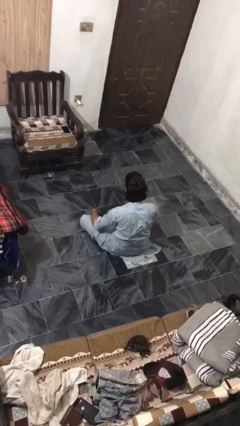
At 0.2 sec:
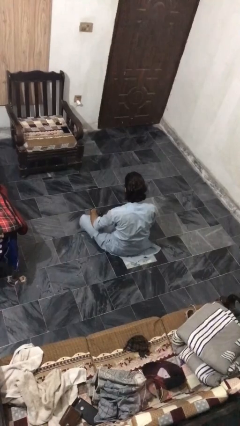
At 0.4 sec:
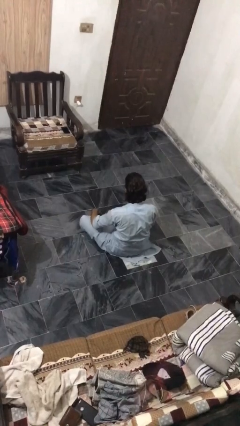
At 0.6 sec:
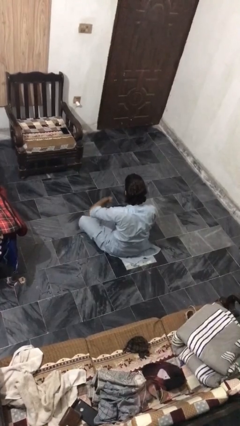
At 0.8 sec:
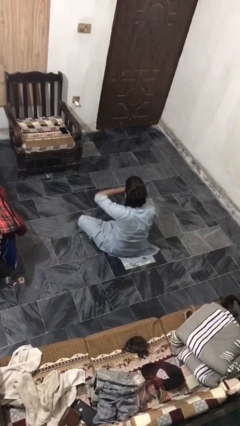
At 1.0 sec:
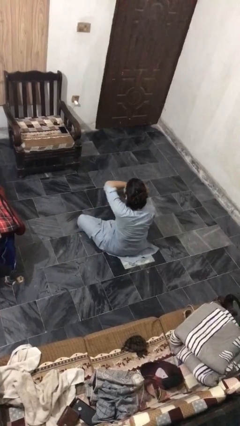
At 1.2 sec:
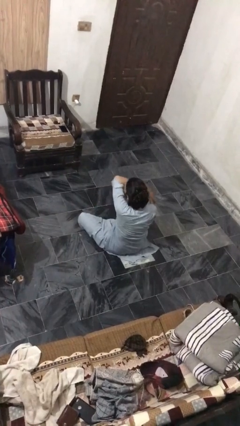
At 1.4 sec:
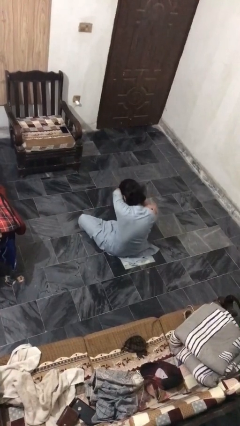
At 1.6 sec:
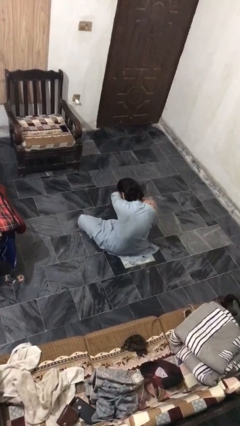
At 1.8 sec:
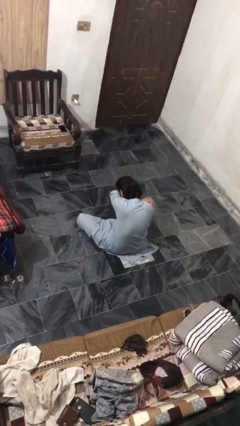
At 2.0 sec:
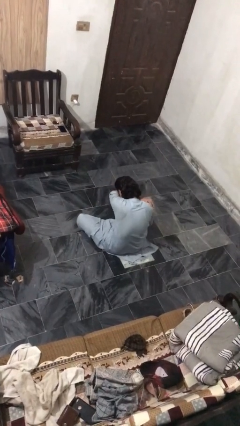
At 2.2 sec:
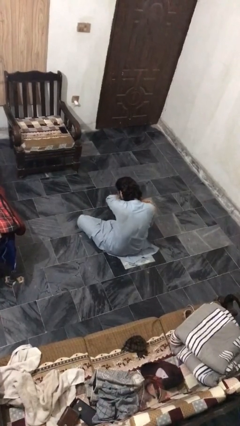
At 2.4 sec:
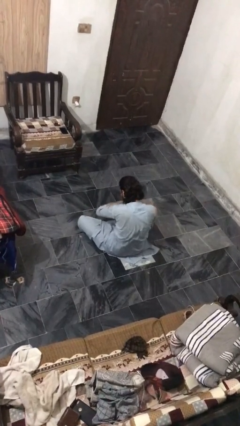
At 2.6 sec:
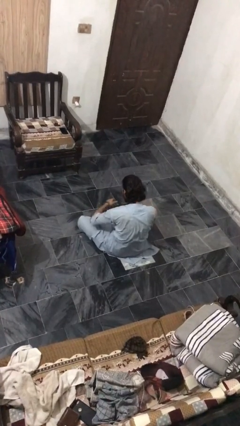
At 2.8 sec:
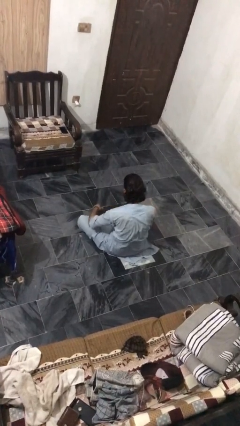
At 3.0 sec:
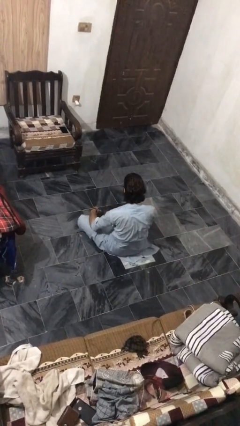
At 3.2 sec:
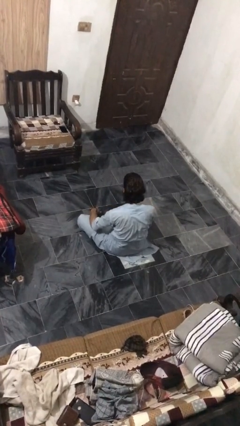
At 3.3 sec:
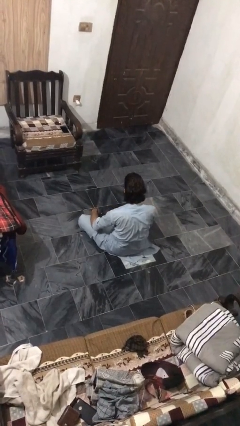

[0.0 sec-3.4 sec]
person sneezes into arm

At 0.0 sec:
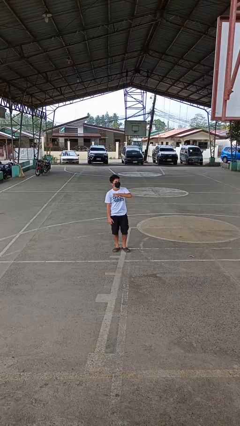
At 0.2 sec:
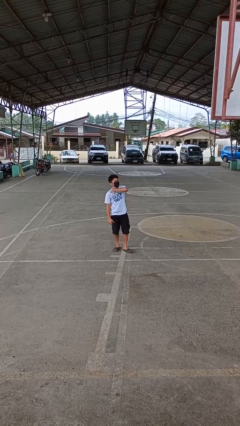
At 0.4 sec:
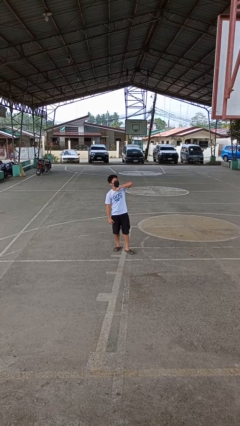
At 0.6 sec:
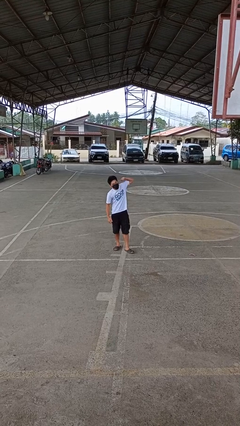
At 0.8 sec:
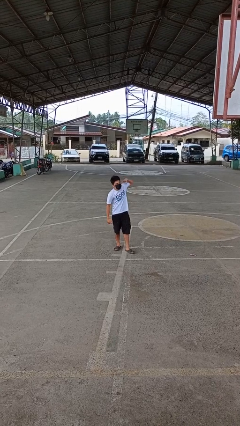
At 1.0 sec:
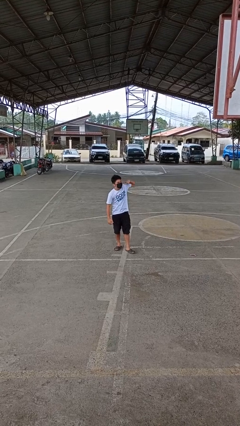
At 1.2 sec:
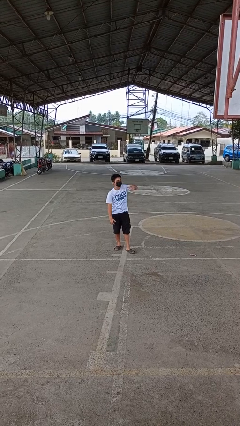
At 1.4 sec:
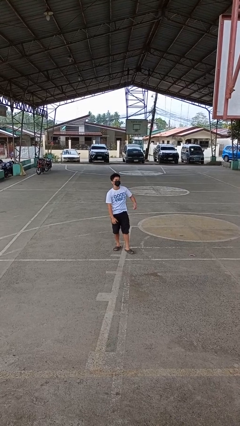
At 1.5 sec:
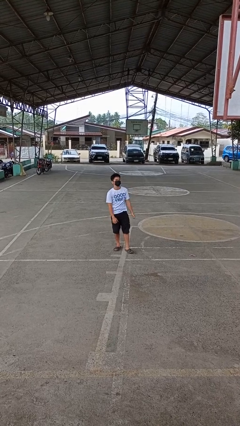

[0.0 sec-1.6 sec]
person gestures cut

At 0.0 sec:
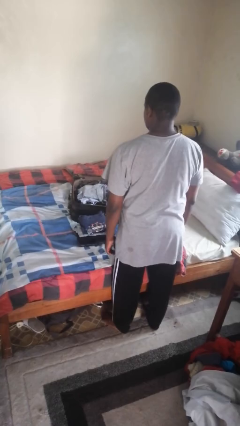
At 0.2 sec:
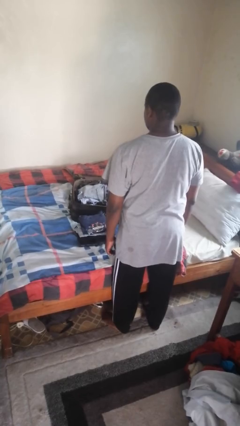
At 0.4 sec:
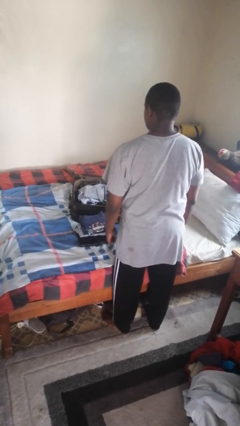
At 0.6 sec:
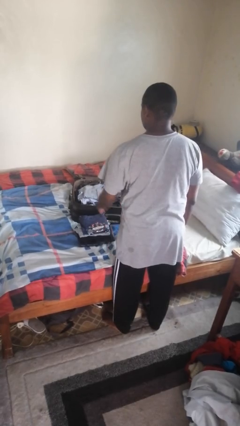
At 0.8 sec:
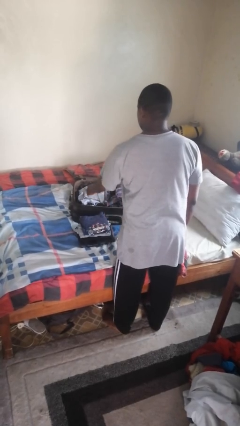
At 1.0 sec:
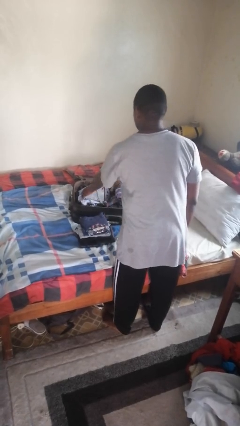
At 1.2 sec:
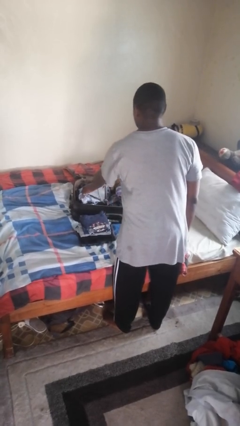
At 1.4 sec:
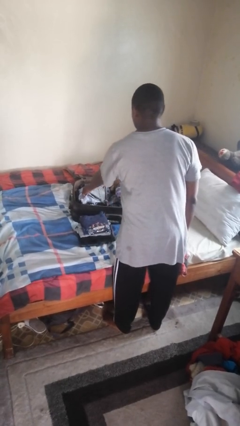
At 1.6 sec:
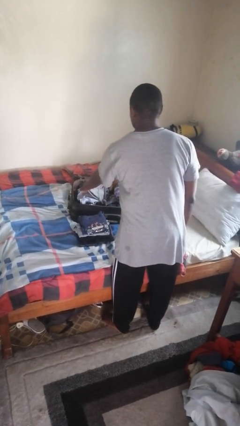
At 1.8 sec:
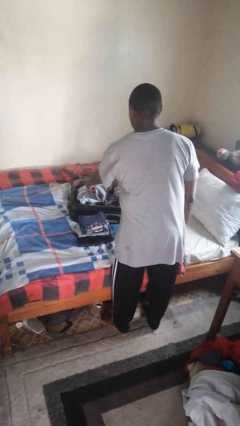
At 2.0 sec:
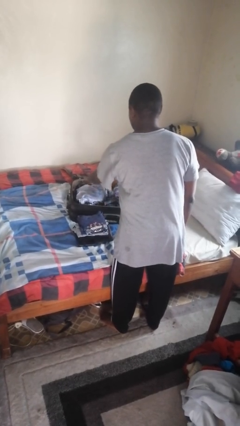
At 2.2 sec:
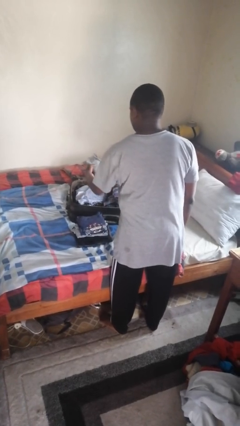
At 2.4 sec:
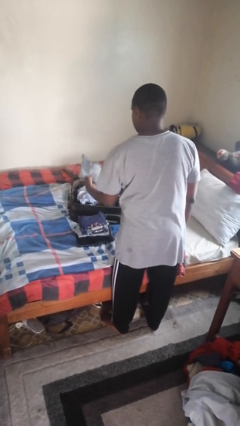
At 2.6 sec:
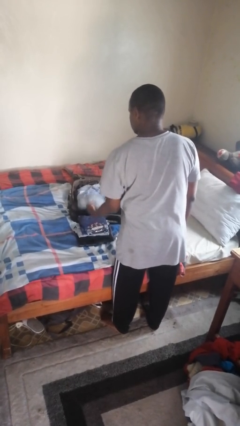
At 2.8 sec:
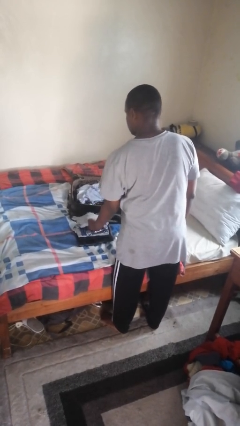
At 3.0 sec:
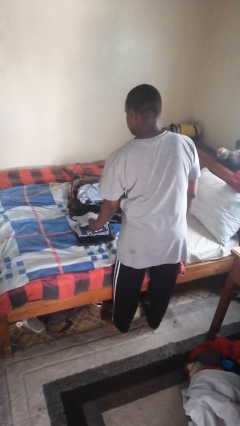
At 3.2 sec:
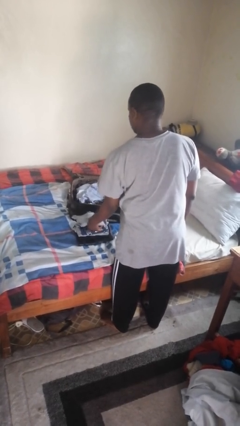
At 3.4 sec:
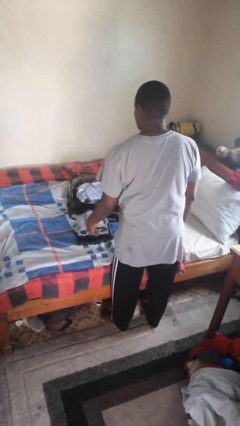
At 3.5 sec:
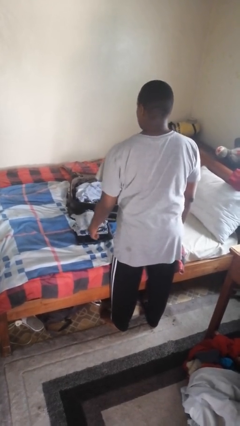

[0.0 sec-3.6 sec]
person unloads clothes from suitcase

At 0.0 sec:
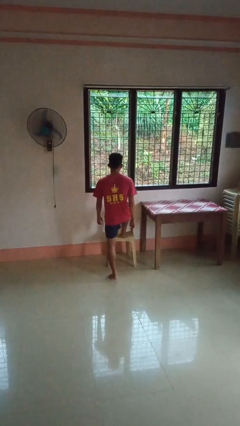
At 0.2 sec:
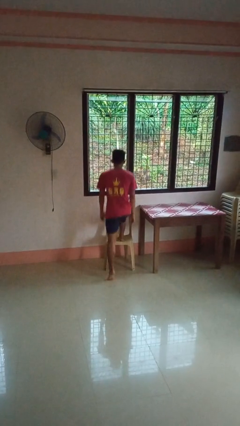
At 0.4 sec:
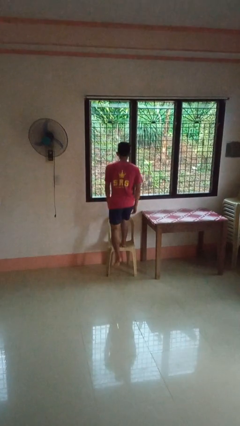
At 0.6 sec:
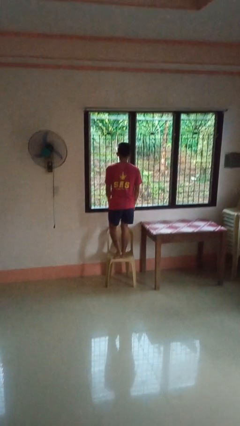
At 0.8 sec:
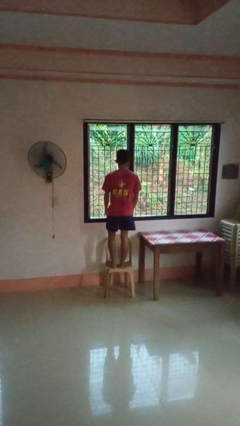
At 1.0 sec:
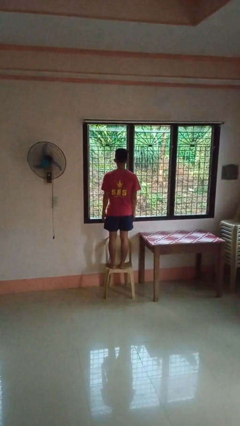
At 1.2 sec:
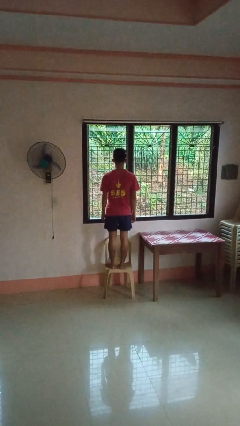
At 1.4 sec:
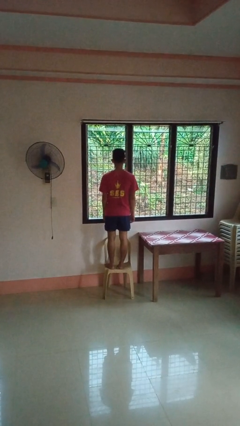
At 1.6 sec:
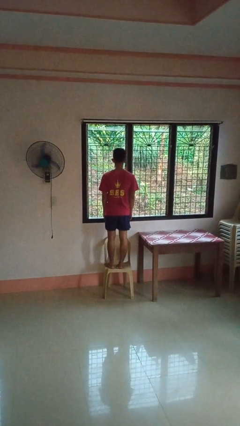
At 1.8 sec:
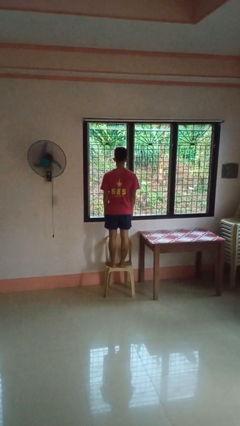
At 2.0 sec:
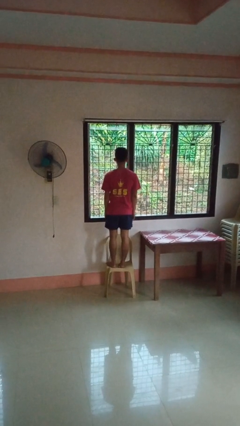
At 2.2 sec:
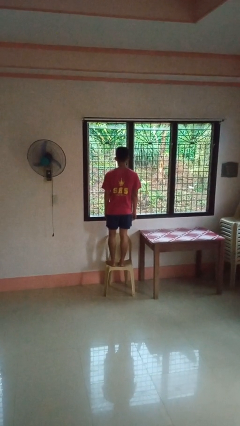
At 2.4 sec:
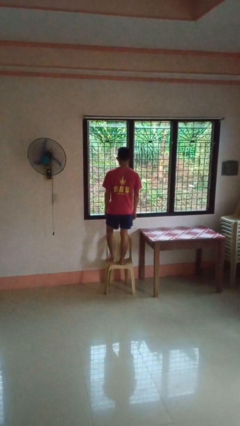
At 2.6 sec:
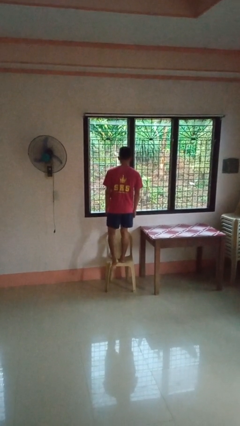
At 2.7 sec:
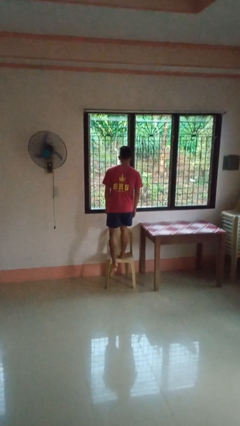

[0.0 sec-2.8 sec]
person climbs on chair

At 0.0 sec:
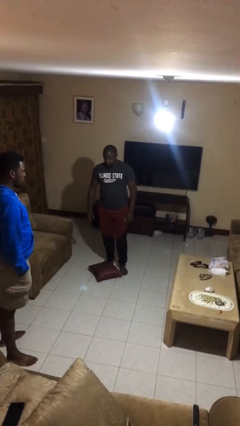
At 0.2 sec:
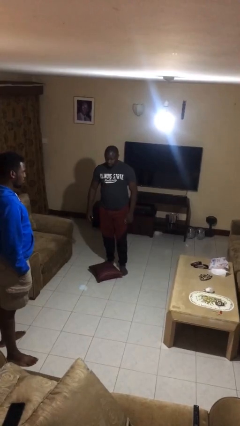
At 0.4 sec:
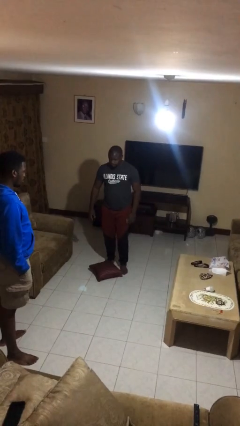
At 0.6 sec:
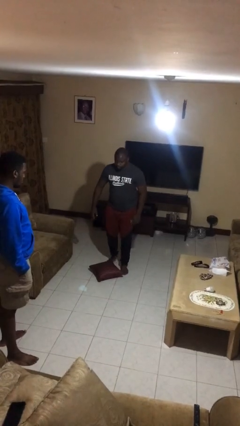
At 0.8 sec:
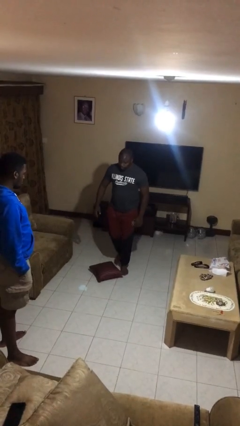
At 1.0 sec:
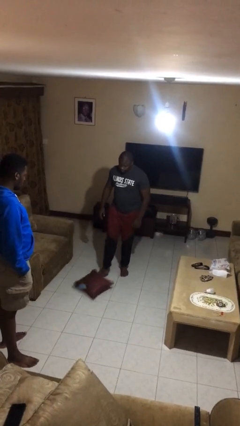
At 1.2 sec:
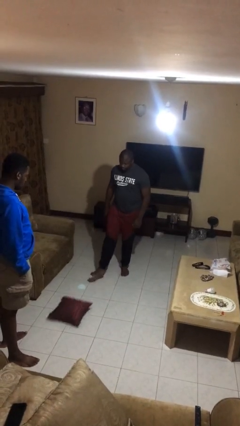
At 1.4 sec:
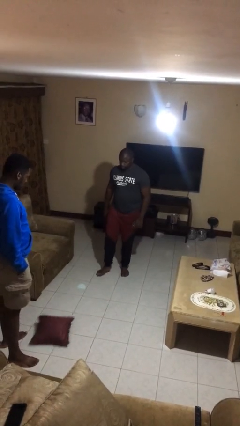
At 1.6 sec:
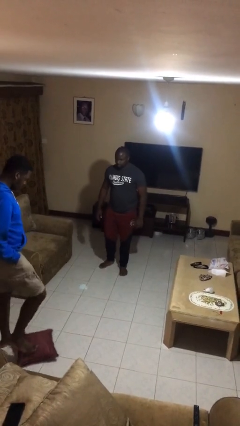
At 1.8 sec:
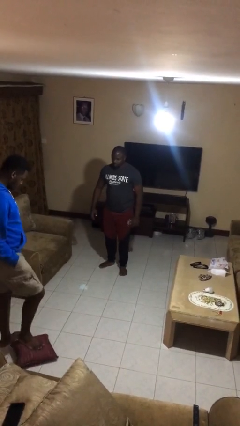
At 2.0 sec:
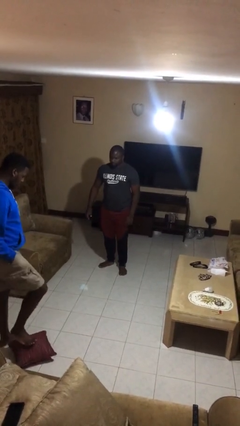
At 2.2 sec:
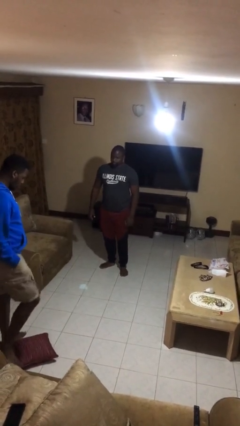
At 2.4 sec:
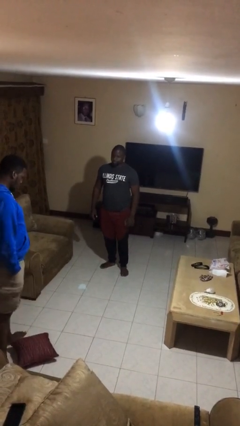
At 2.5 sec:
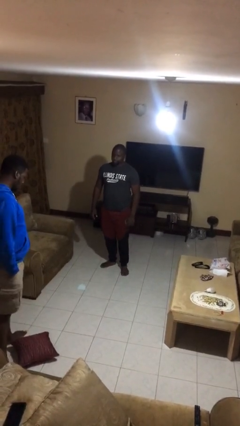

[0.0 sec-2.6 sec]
person kicks object to person

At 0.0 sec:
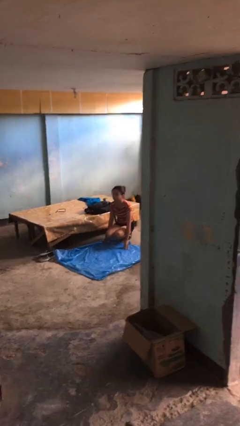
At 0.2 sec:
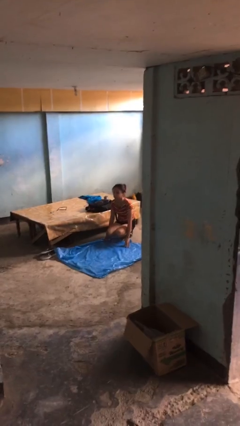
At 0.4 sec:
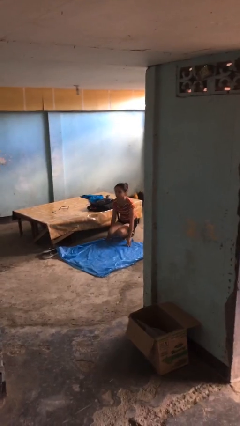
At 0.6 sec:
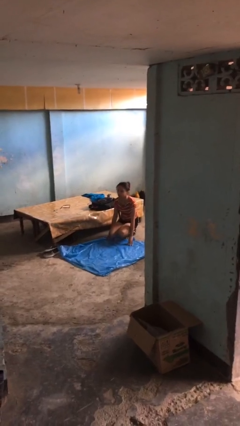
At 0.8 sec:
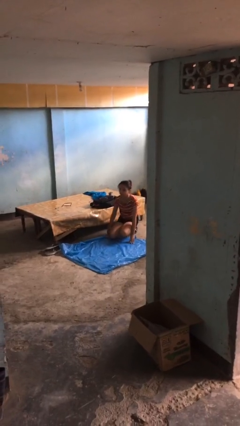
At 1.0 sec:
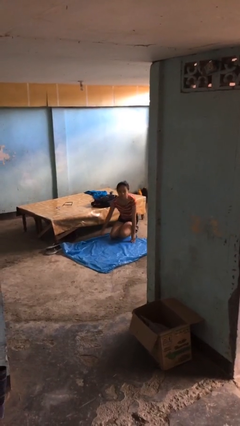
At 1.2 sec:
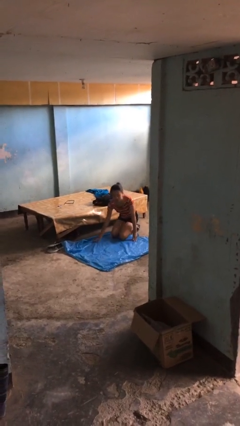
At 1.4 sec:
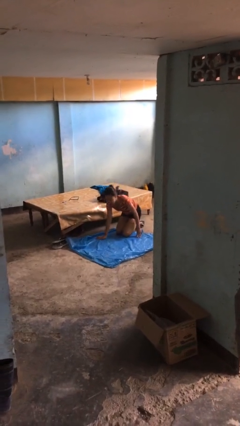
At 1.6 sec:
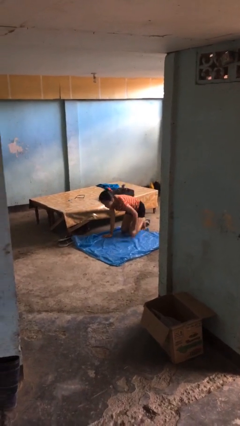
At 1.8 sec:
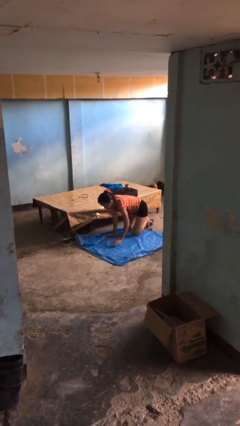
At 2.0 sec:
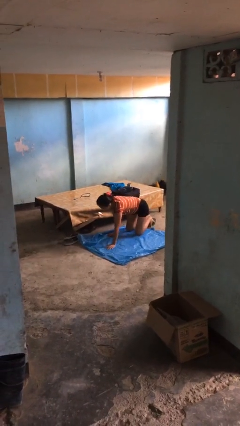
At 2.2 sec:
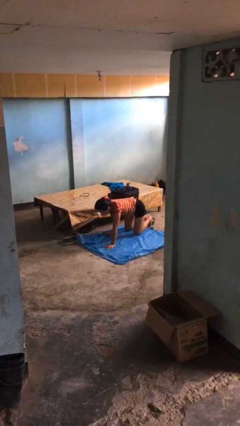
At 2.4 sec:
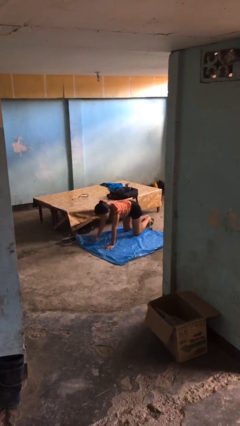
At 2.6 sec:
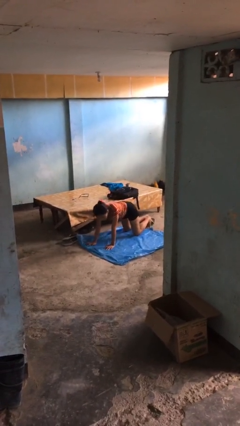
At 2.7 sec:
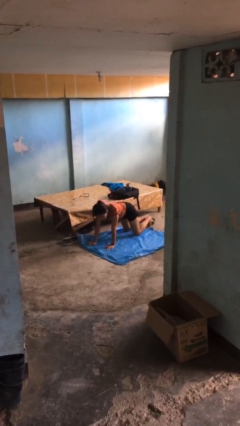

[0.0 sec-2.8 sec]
person crawls

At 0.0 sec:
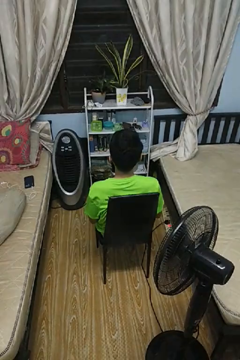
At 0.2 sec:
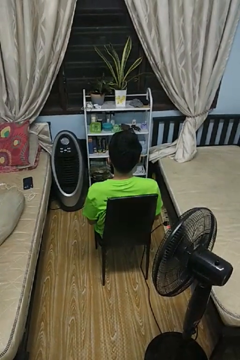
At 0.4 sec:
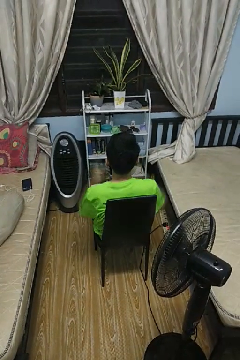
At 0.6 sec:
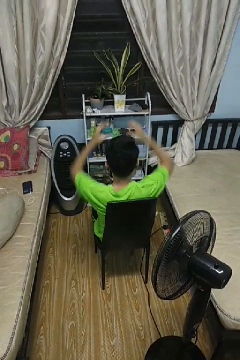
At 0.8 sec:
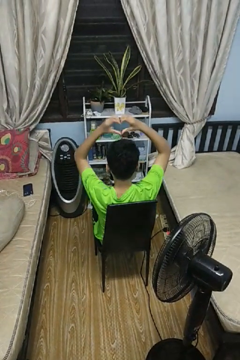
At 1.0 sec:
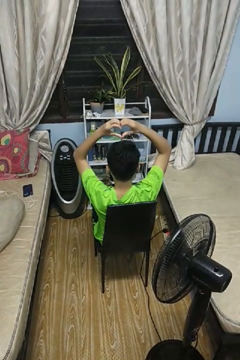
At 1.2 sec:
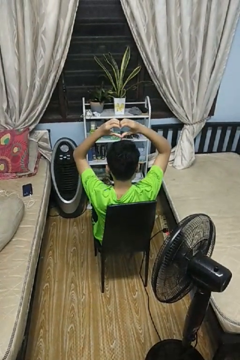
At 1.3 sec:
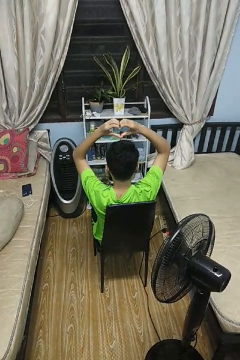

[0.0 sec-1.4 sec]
person gestures heart
